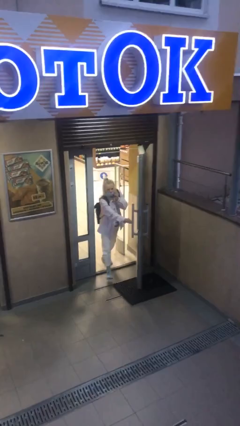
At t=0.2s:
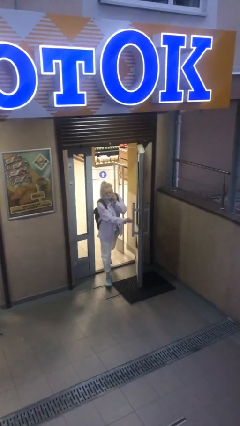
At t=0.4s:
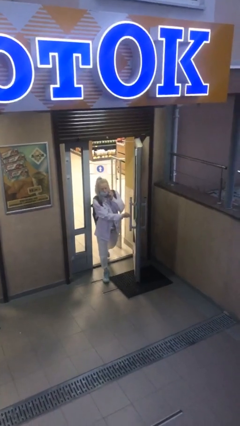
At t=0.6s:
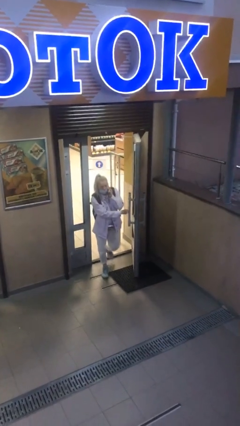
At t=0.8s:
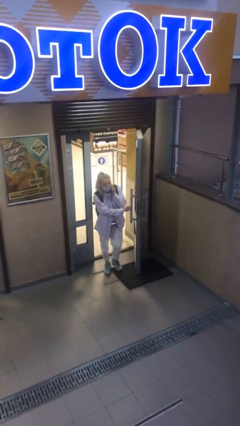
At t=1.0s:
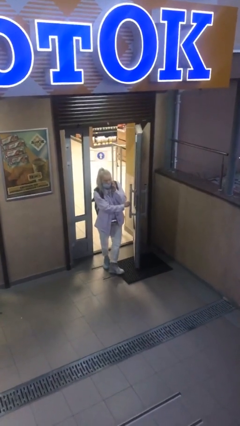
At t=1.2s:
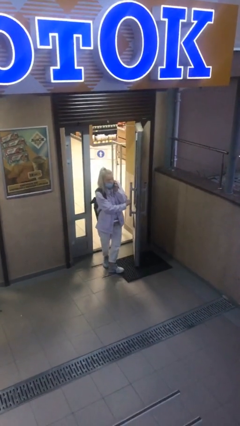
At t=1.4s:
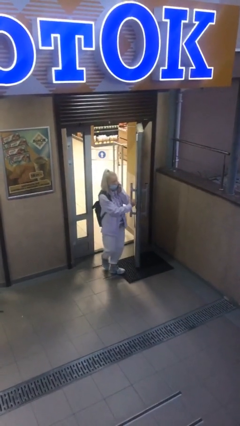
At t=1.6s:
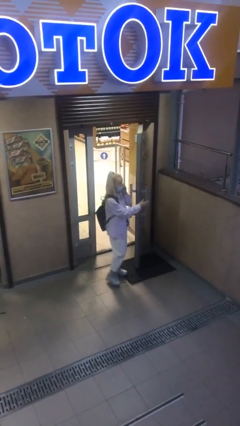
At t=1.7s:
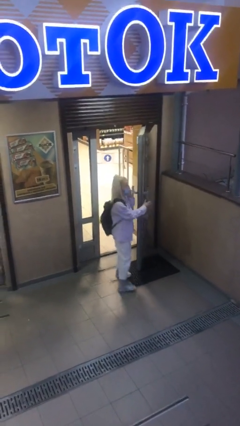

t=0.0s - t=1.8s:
person enters scene through structure

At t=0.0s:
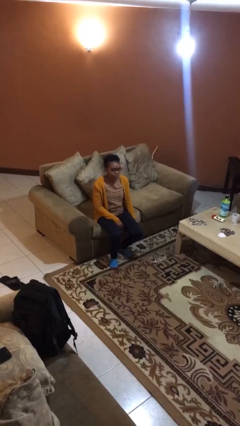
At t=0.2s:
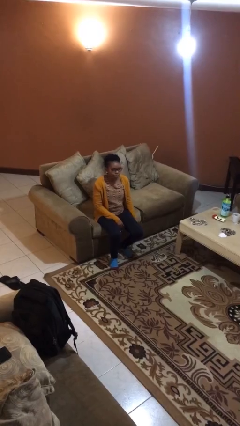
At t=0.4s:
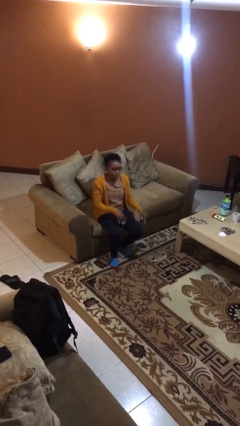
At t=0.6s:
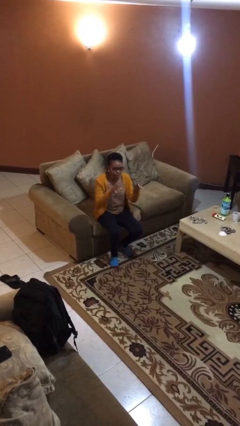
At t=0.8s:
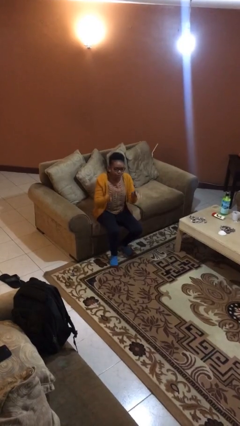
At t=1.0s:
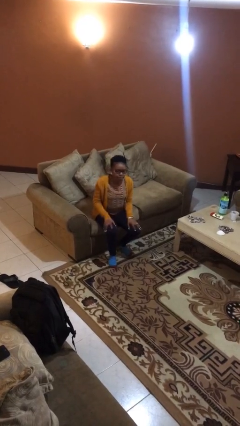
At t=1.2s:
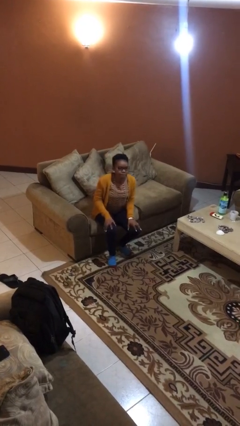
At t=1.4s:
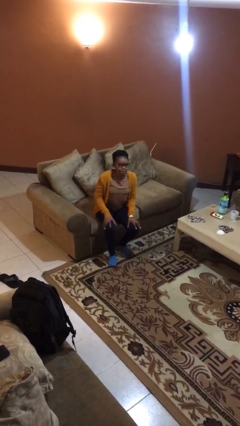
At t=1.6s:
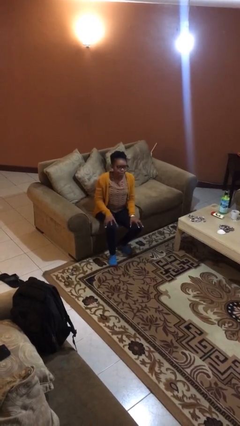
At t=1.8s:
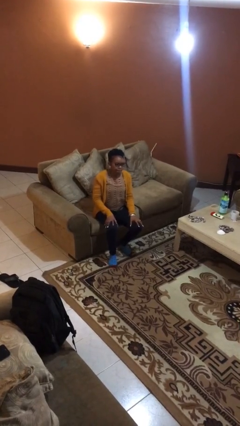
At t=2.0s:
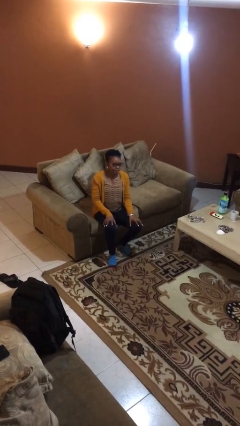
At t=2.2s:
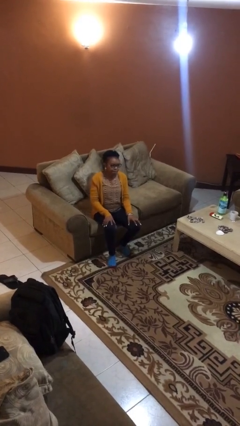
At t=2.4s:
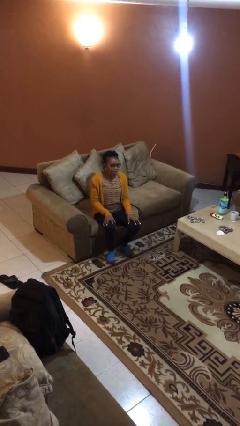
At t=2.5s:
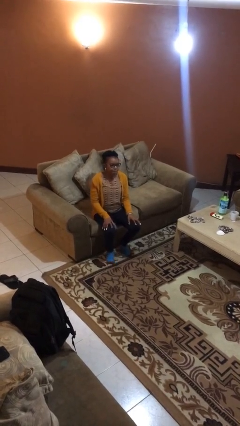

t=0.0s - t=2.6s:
person slaps hands on thighs

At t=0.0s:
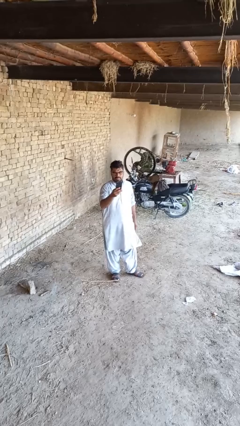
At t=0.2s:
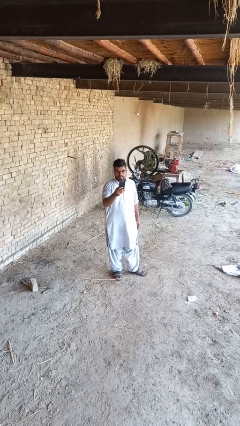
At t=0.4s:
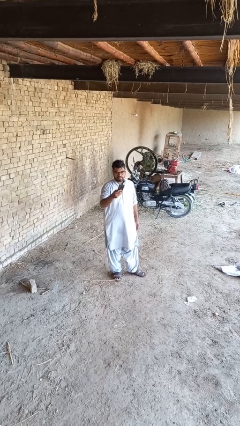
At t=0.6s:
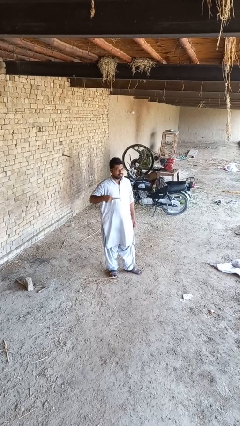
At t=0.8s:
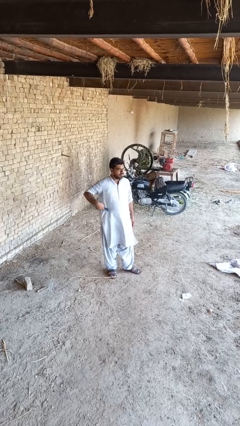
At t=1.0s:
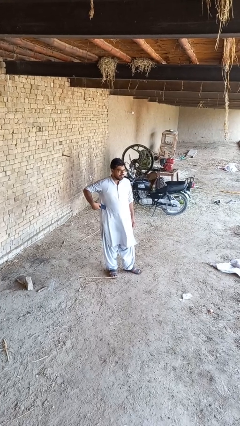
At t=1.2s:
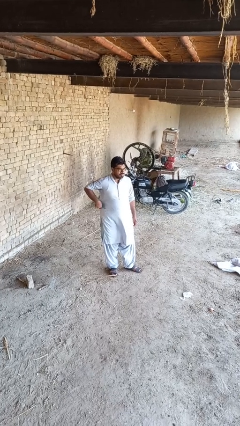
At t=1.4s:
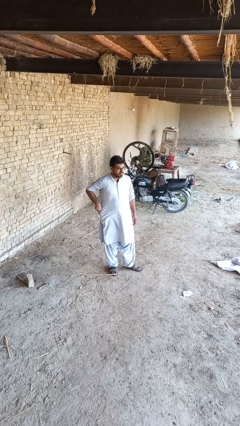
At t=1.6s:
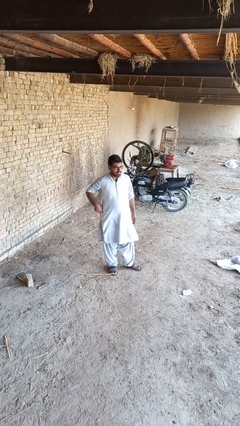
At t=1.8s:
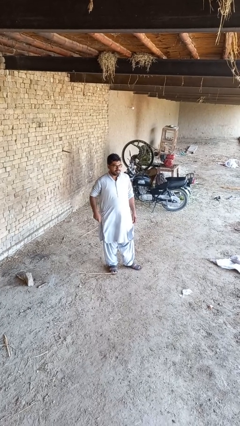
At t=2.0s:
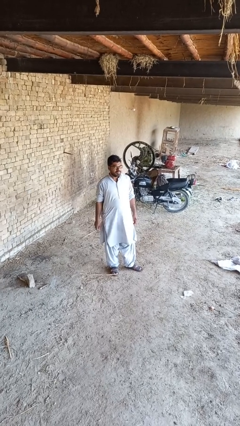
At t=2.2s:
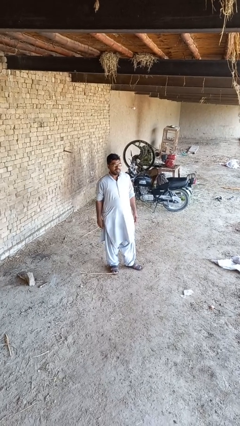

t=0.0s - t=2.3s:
person puts phone into pocket

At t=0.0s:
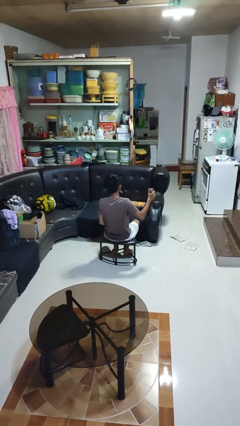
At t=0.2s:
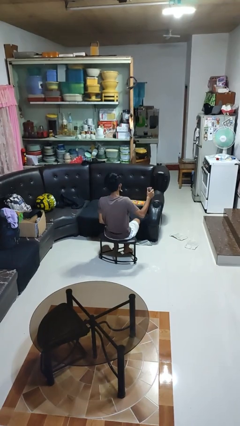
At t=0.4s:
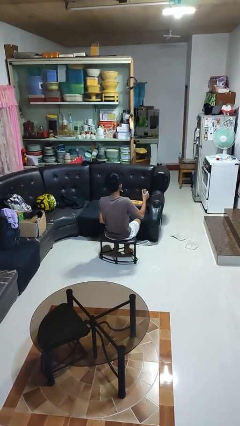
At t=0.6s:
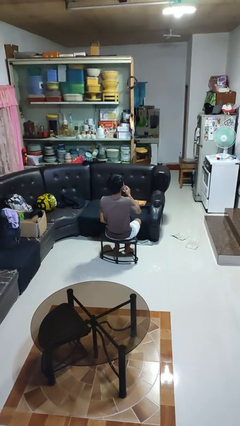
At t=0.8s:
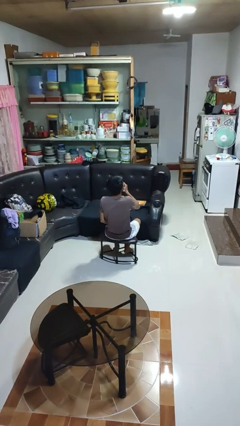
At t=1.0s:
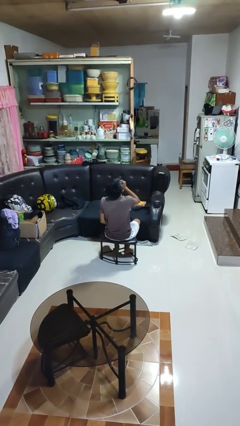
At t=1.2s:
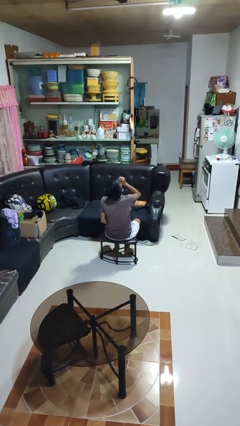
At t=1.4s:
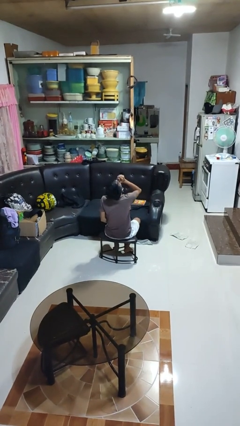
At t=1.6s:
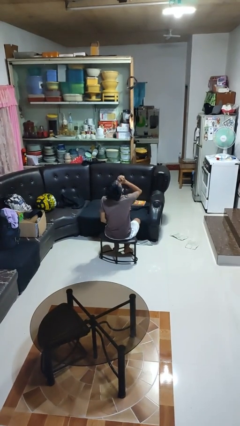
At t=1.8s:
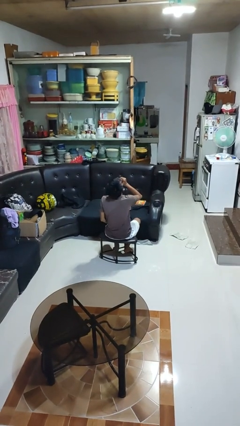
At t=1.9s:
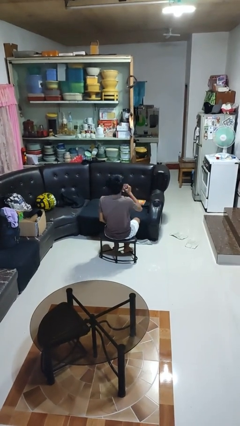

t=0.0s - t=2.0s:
person drinks from beverage can

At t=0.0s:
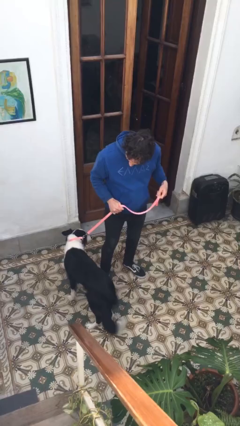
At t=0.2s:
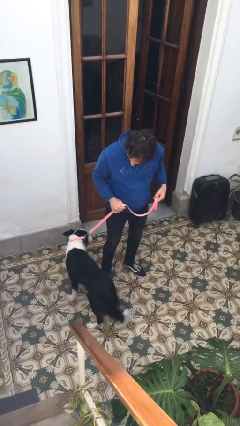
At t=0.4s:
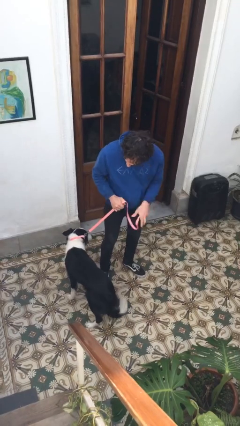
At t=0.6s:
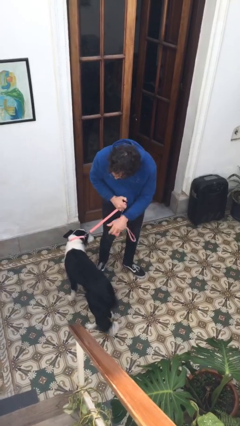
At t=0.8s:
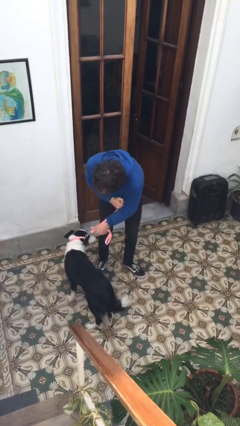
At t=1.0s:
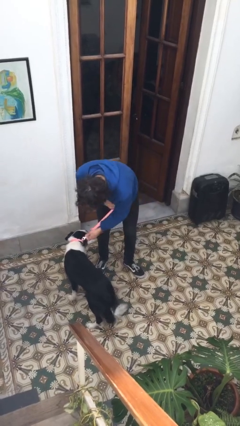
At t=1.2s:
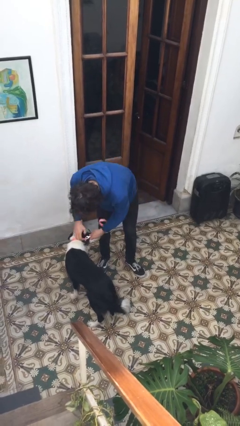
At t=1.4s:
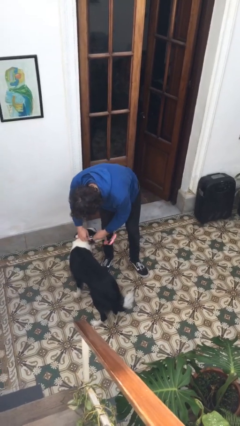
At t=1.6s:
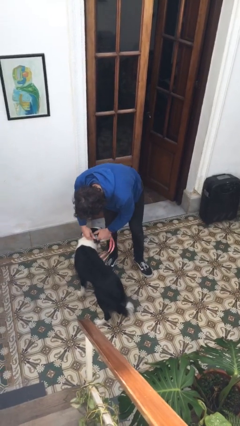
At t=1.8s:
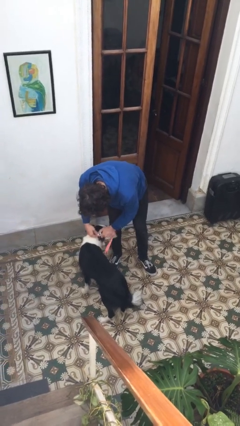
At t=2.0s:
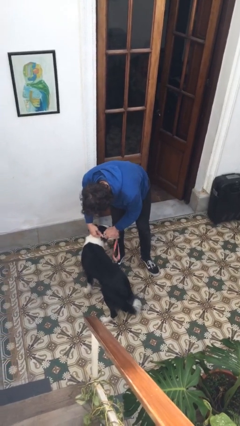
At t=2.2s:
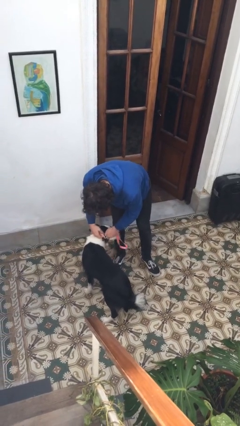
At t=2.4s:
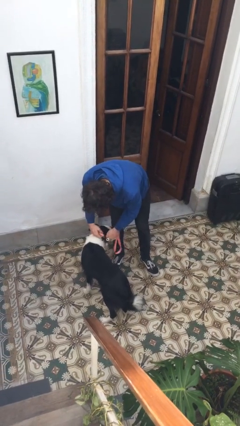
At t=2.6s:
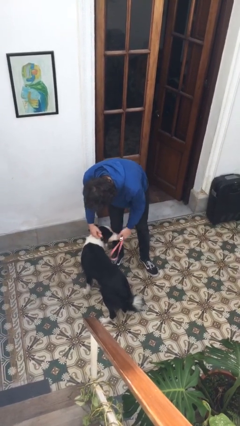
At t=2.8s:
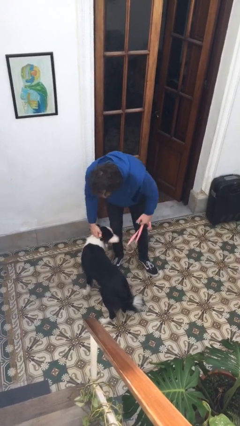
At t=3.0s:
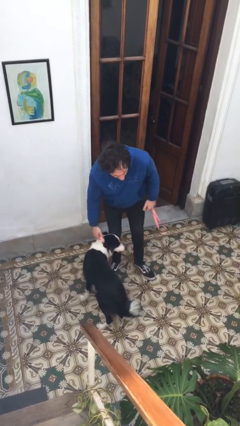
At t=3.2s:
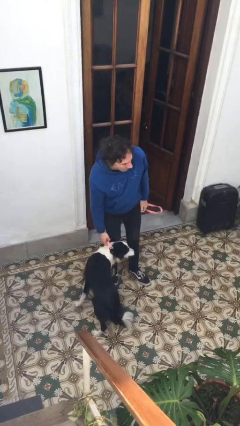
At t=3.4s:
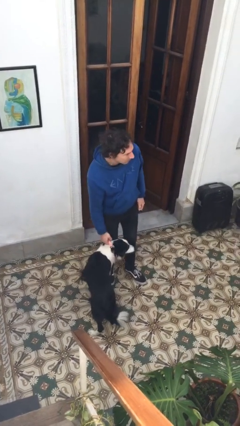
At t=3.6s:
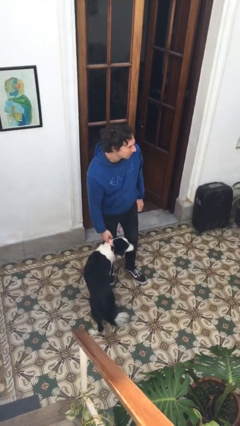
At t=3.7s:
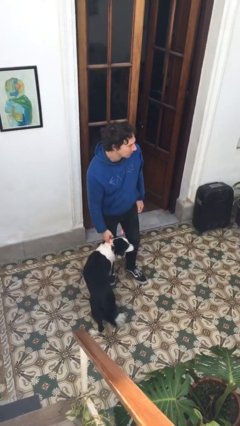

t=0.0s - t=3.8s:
person unattaches leash from dog

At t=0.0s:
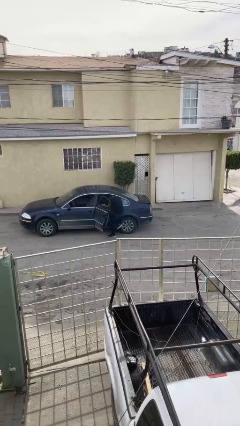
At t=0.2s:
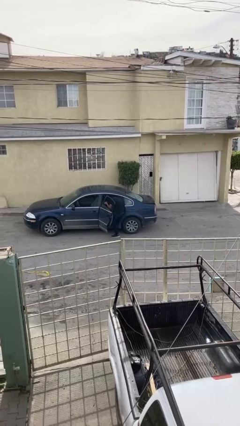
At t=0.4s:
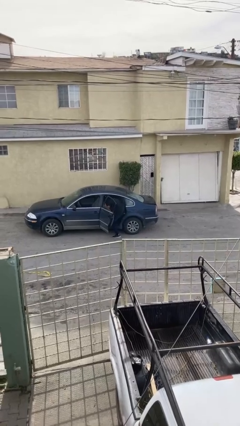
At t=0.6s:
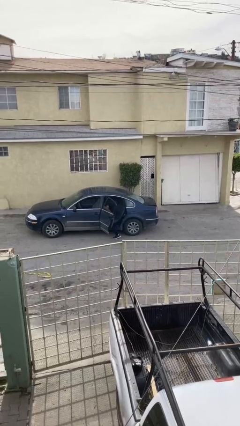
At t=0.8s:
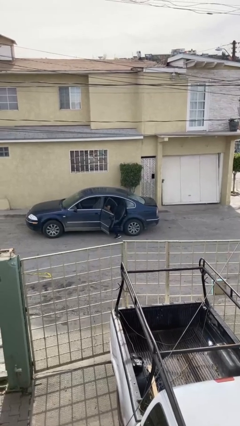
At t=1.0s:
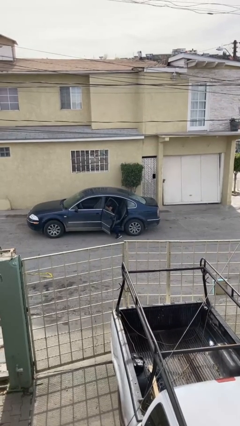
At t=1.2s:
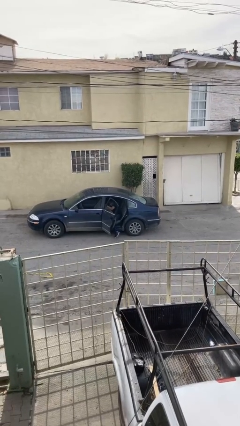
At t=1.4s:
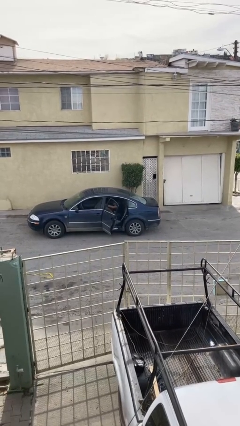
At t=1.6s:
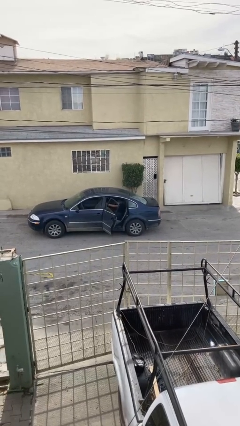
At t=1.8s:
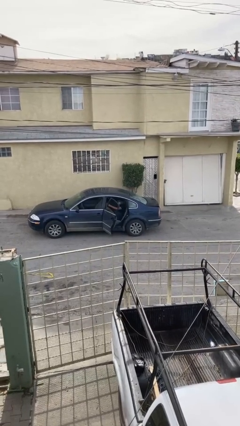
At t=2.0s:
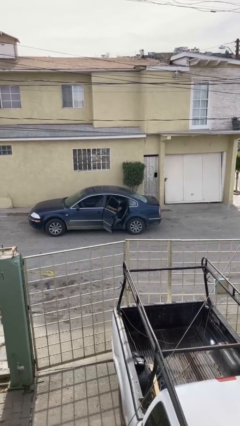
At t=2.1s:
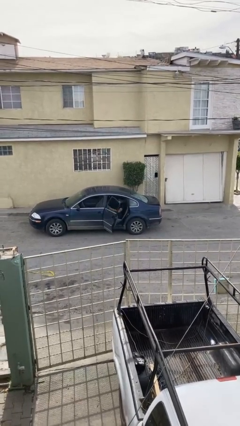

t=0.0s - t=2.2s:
person enters car

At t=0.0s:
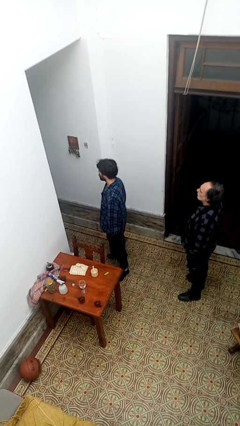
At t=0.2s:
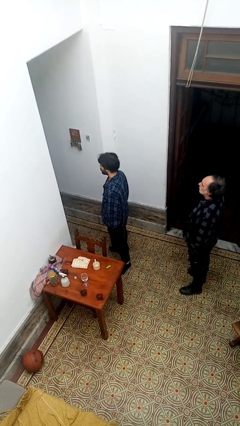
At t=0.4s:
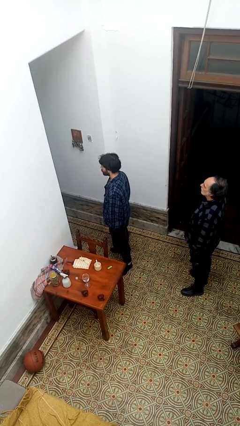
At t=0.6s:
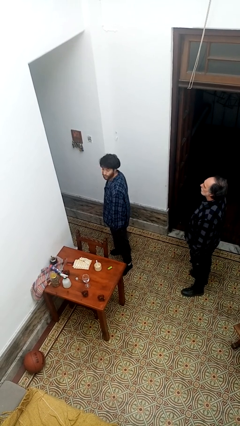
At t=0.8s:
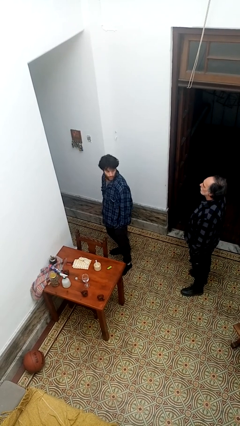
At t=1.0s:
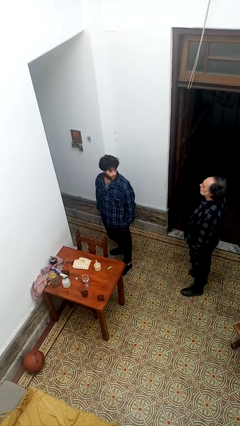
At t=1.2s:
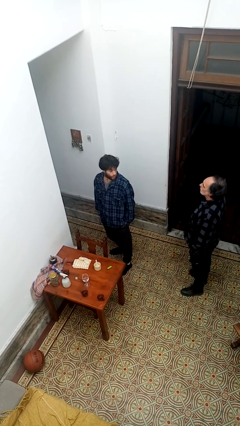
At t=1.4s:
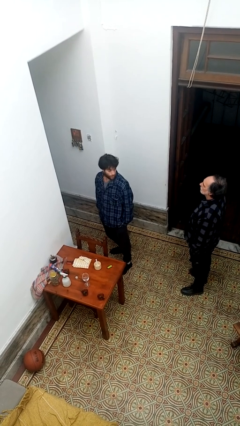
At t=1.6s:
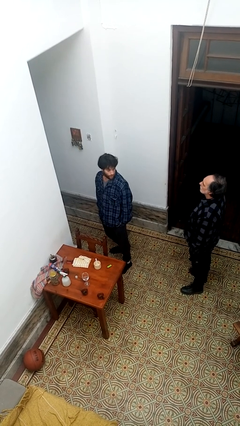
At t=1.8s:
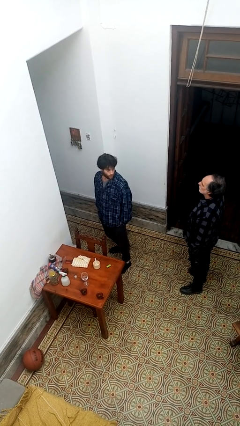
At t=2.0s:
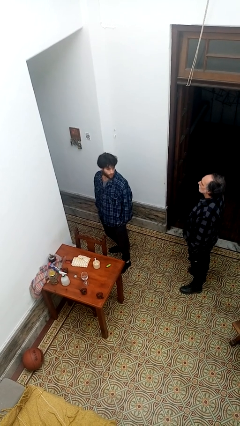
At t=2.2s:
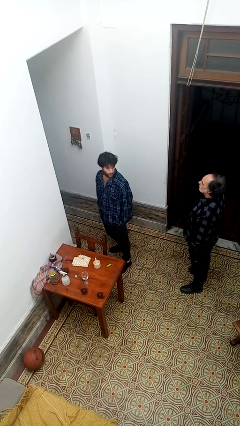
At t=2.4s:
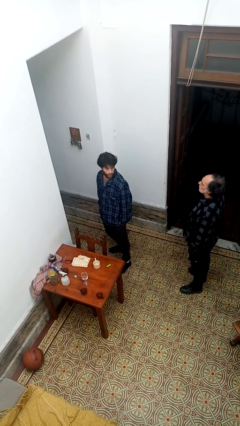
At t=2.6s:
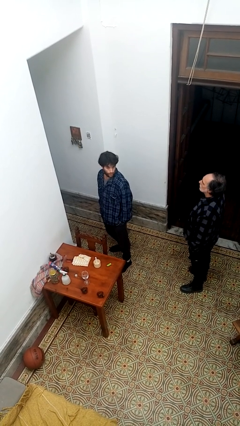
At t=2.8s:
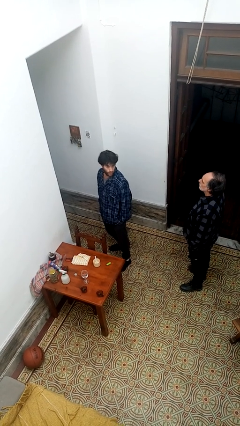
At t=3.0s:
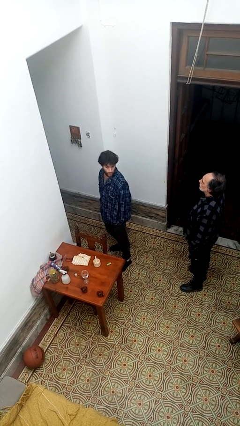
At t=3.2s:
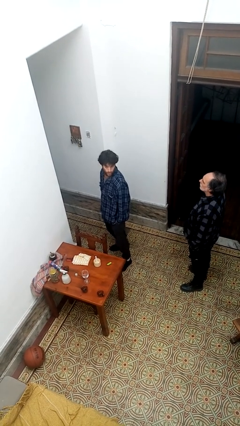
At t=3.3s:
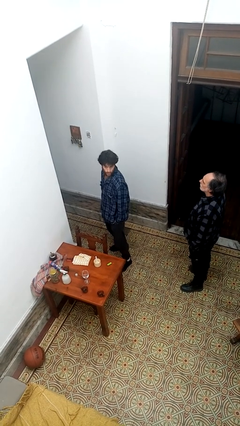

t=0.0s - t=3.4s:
person looks over shoulder
